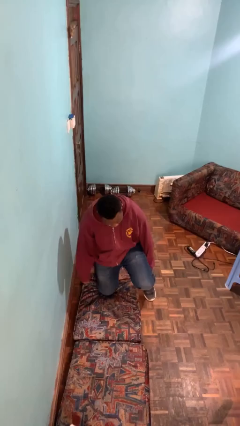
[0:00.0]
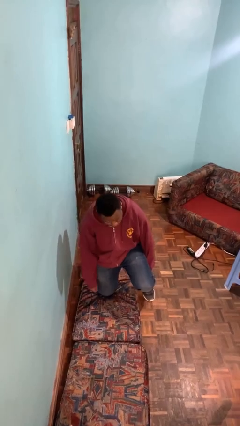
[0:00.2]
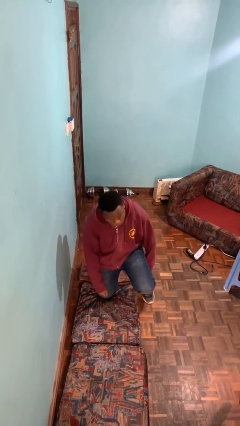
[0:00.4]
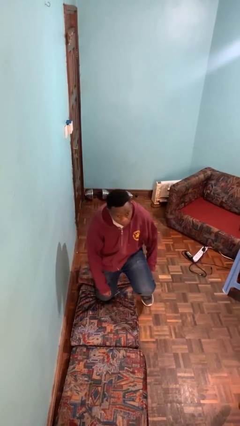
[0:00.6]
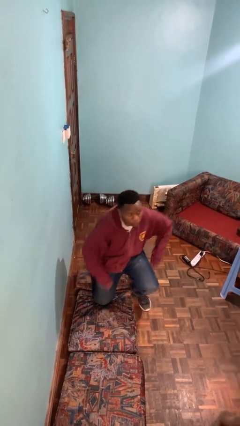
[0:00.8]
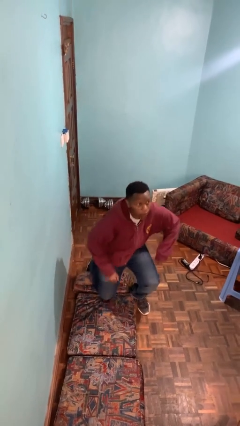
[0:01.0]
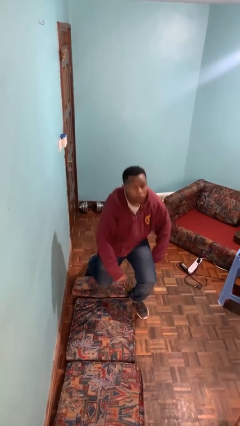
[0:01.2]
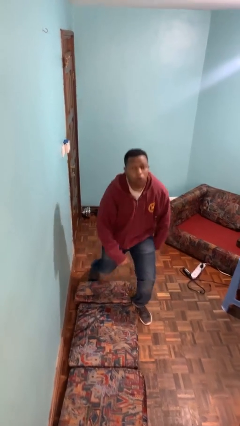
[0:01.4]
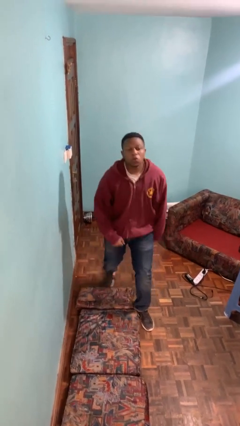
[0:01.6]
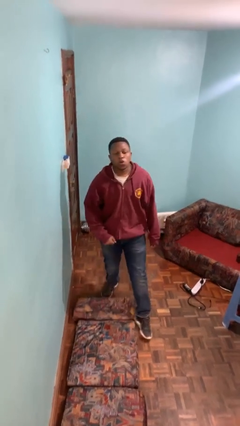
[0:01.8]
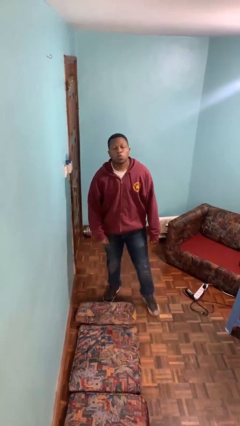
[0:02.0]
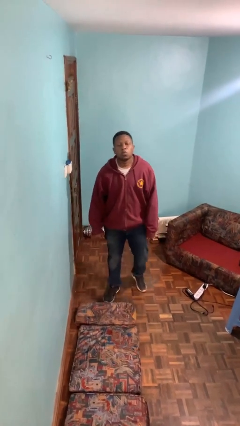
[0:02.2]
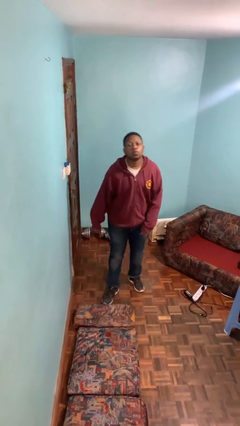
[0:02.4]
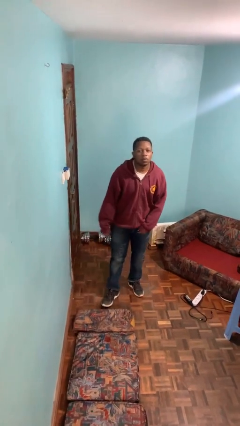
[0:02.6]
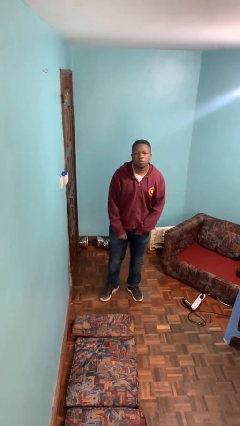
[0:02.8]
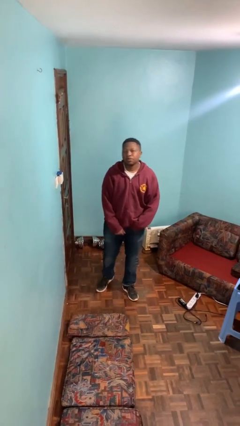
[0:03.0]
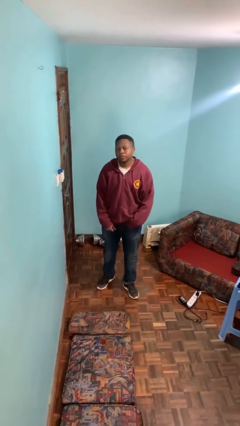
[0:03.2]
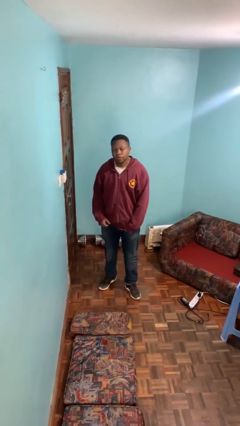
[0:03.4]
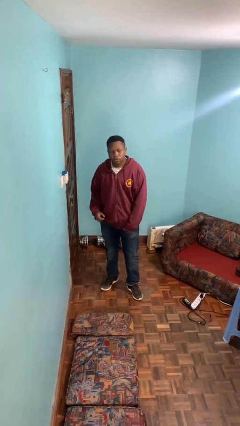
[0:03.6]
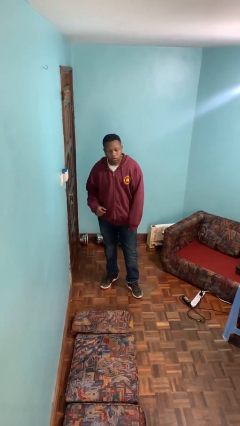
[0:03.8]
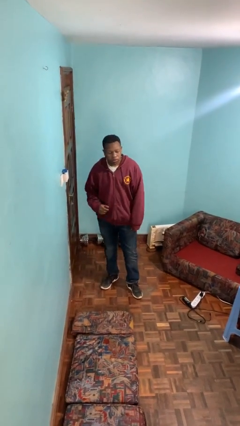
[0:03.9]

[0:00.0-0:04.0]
person stands up from floor

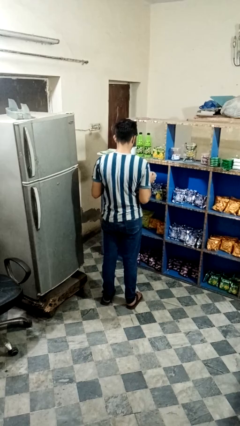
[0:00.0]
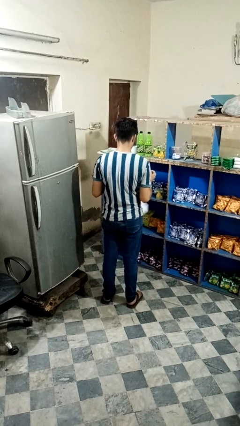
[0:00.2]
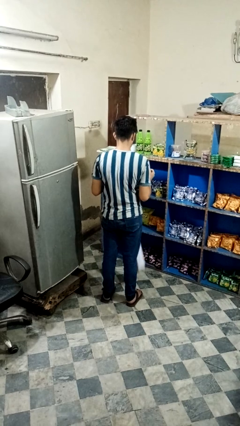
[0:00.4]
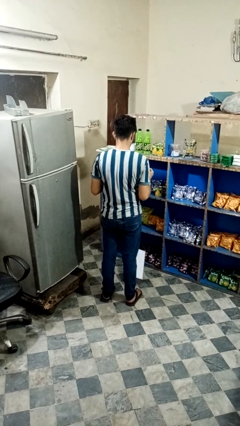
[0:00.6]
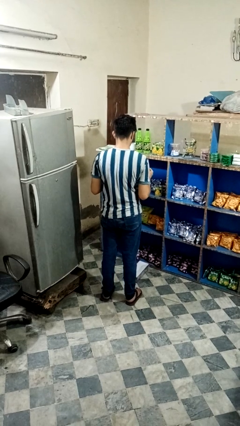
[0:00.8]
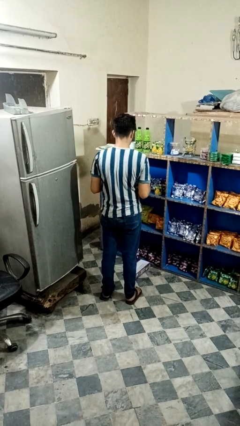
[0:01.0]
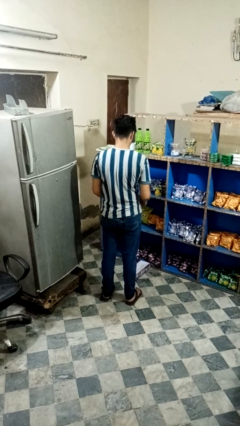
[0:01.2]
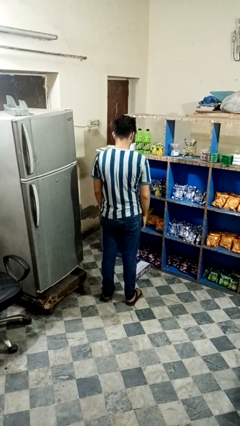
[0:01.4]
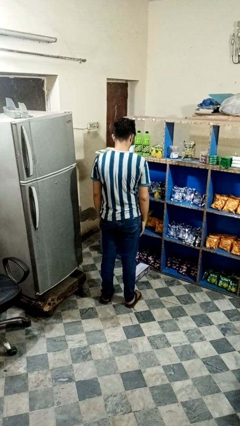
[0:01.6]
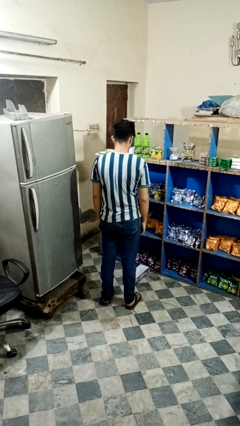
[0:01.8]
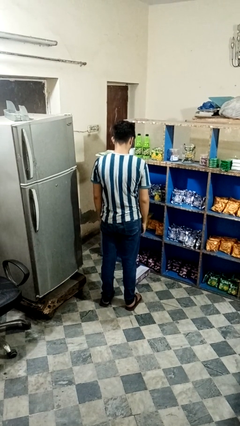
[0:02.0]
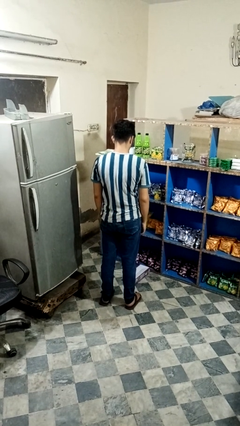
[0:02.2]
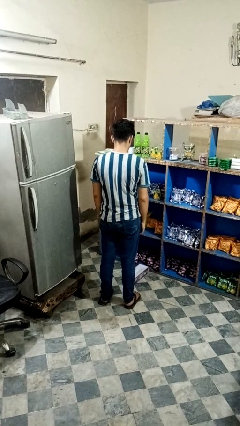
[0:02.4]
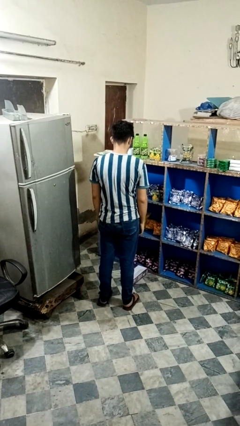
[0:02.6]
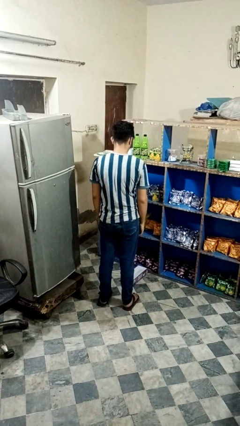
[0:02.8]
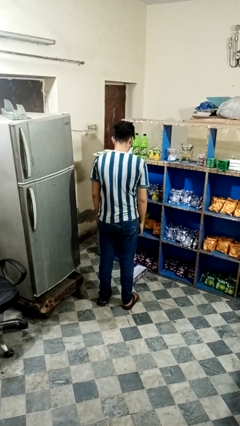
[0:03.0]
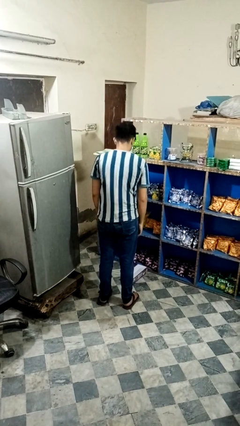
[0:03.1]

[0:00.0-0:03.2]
person drops object

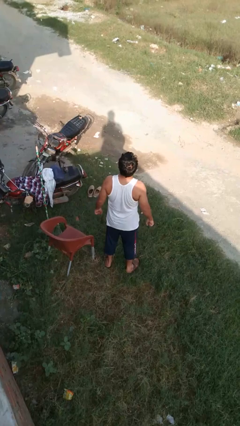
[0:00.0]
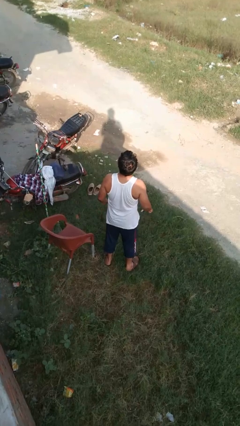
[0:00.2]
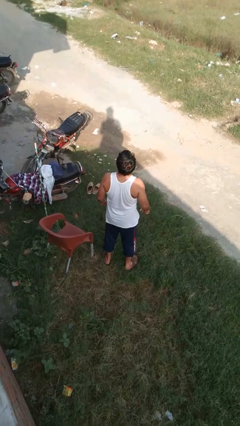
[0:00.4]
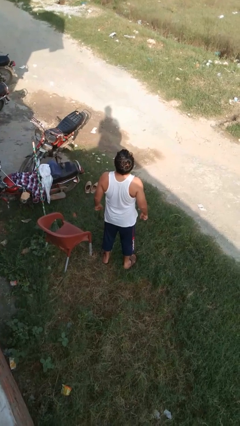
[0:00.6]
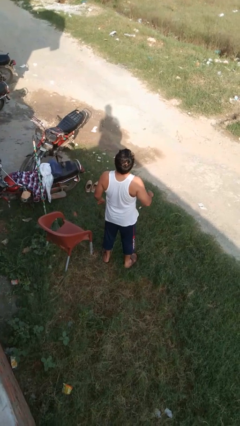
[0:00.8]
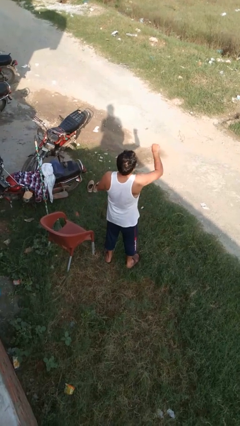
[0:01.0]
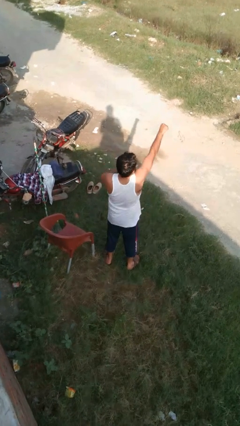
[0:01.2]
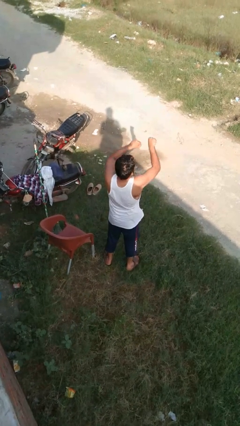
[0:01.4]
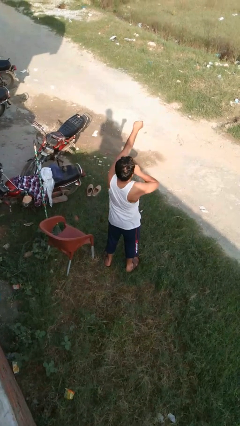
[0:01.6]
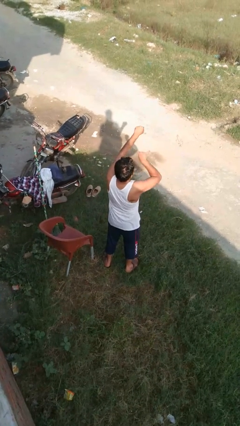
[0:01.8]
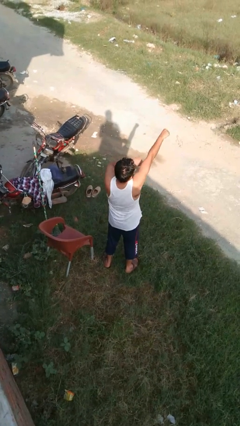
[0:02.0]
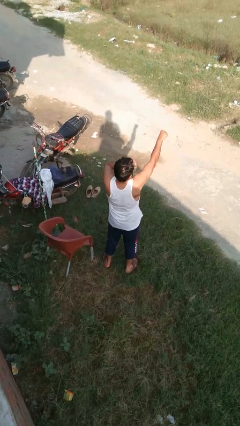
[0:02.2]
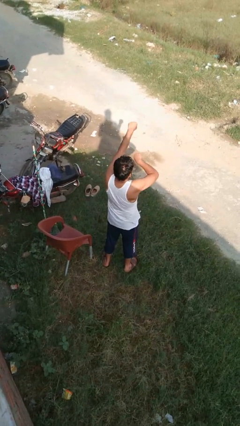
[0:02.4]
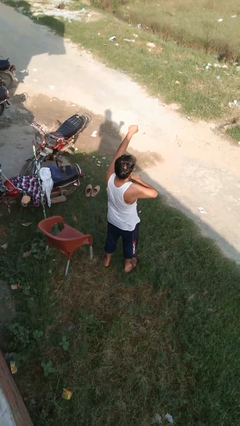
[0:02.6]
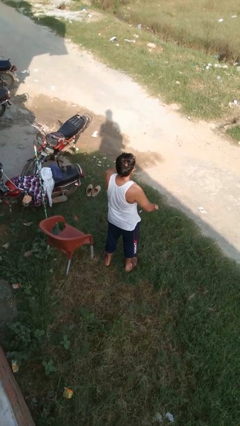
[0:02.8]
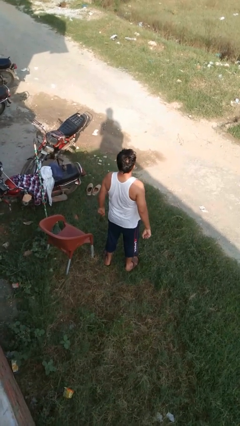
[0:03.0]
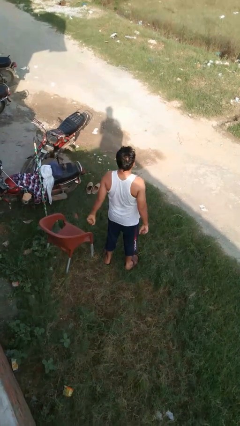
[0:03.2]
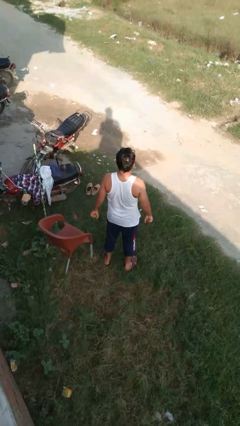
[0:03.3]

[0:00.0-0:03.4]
person punches

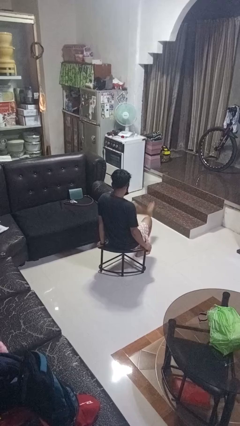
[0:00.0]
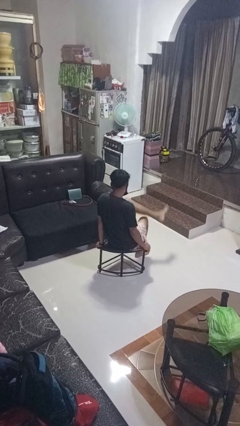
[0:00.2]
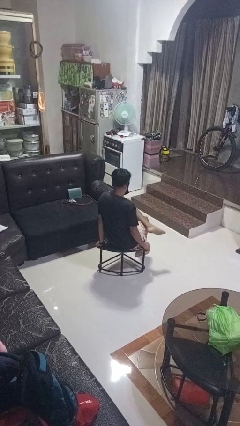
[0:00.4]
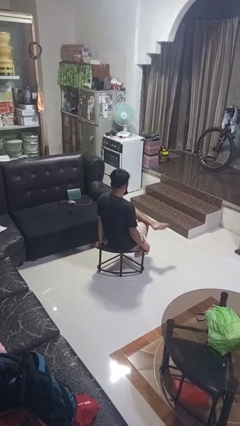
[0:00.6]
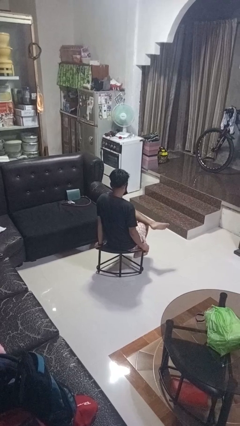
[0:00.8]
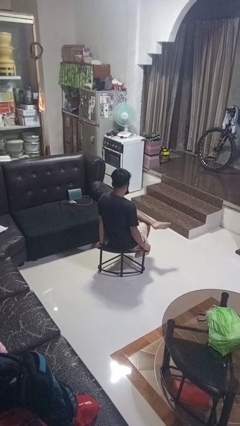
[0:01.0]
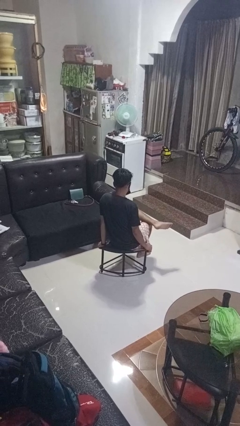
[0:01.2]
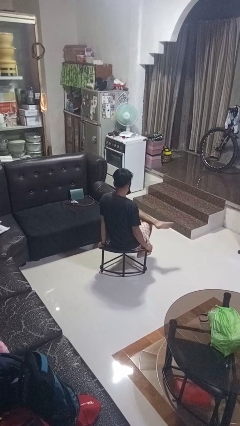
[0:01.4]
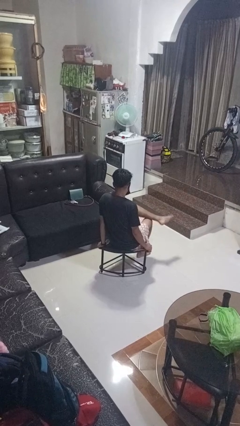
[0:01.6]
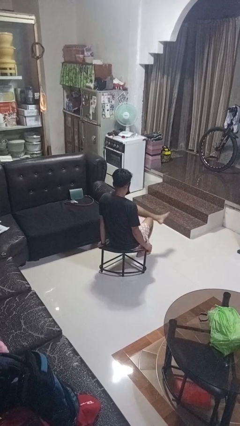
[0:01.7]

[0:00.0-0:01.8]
person crosses legs

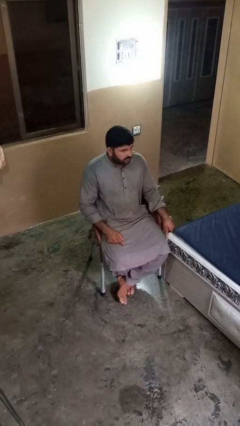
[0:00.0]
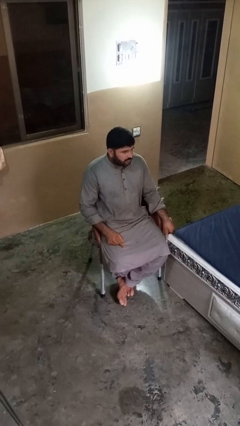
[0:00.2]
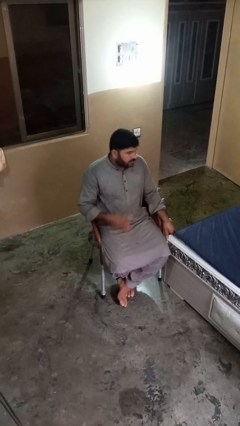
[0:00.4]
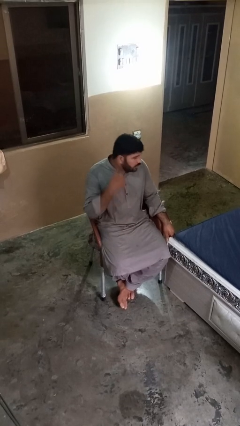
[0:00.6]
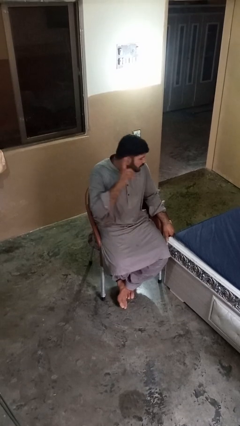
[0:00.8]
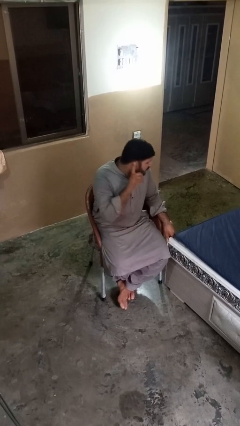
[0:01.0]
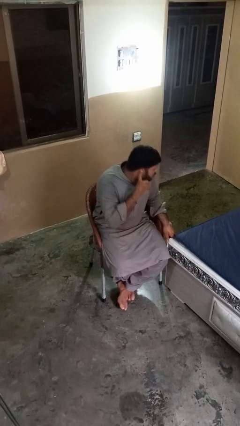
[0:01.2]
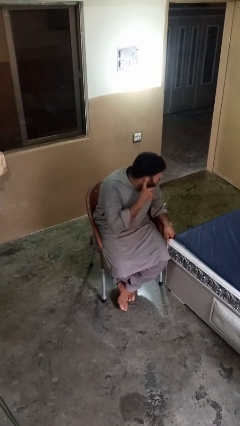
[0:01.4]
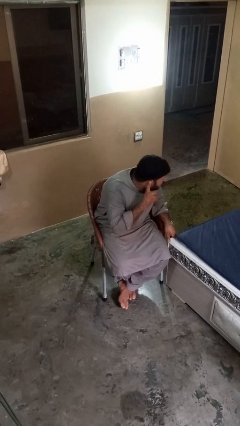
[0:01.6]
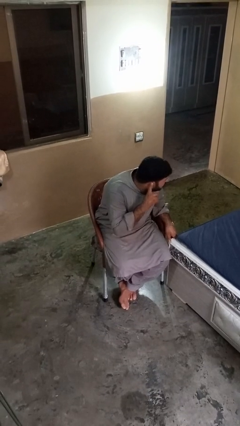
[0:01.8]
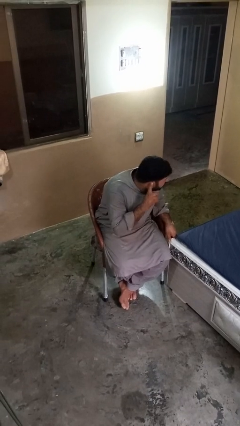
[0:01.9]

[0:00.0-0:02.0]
person gestures listen closely

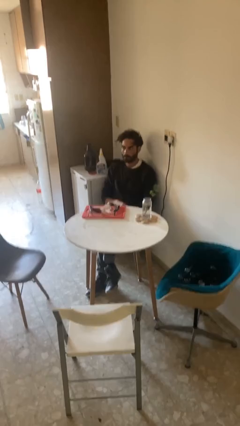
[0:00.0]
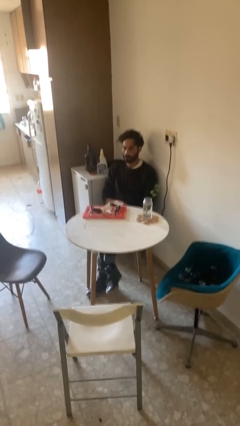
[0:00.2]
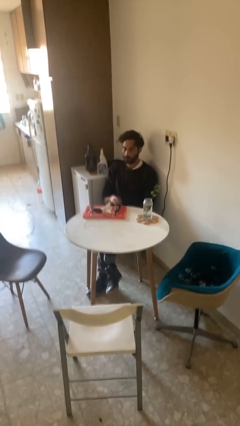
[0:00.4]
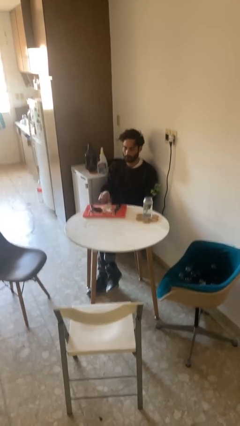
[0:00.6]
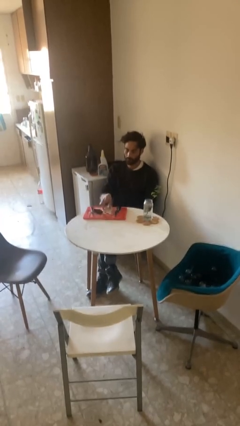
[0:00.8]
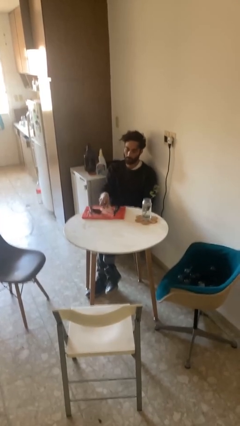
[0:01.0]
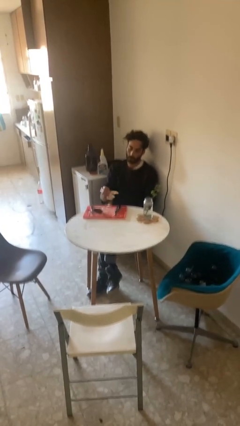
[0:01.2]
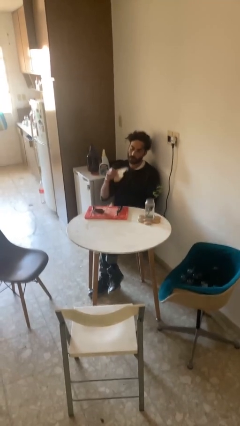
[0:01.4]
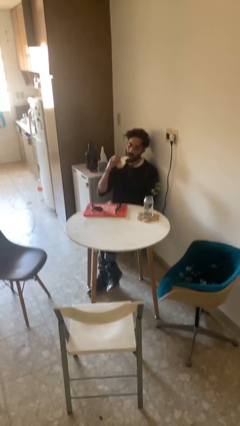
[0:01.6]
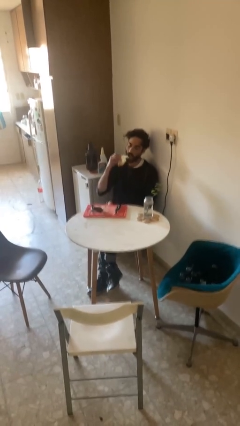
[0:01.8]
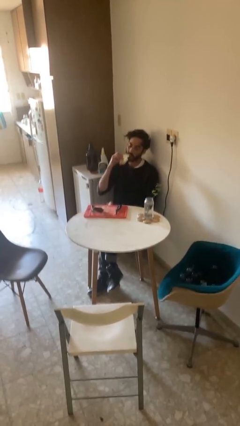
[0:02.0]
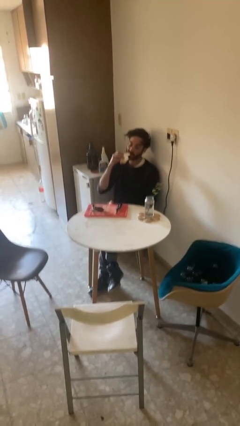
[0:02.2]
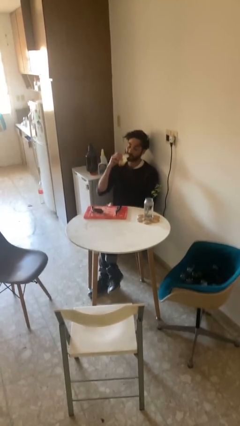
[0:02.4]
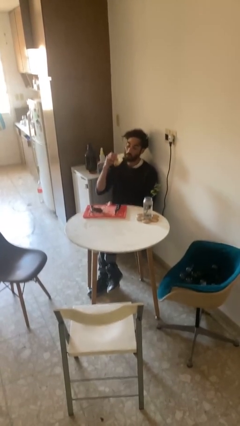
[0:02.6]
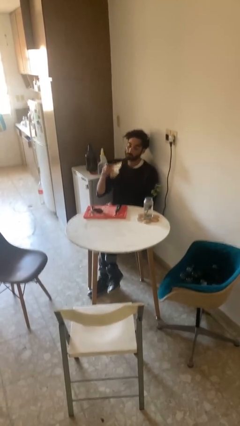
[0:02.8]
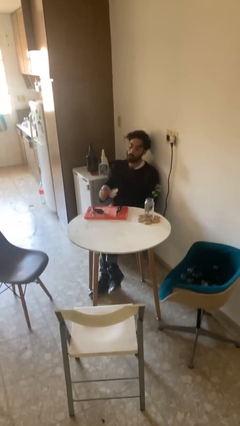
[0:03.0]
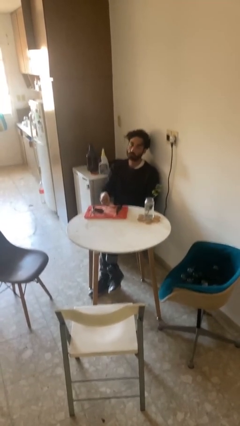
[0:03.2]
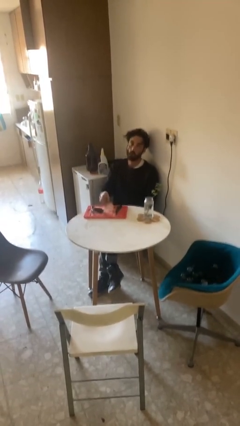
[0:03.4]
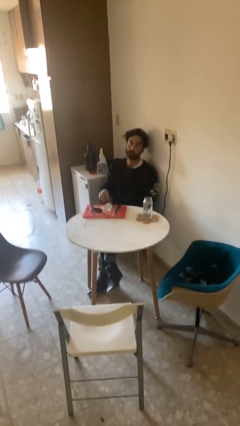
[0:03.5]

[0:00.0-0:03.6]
person eats with hands
